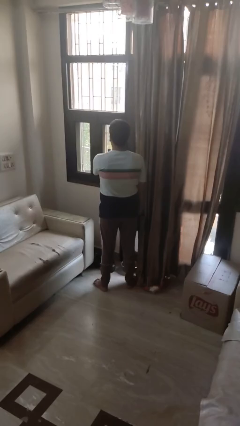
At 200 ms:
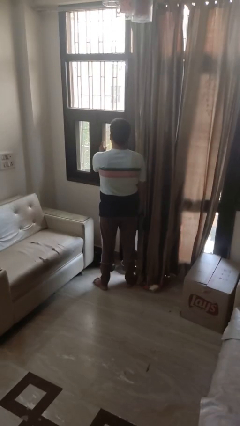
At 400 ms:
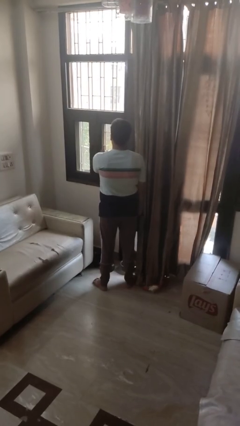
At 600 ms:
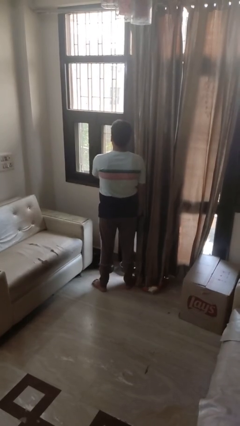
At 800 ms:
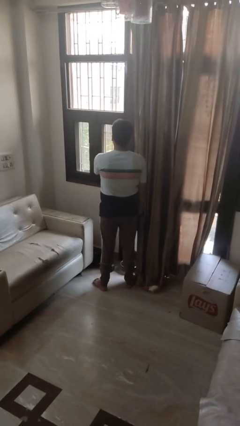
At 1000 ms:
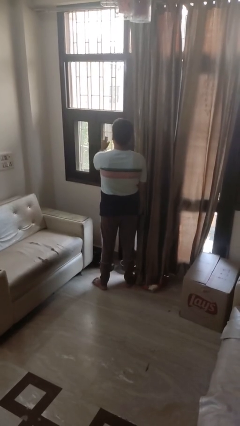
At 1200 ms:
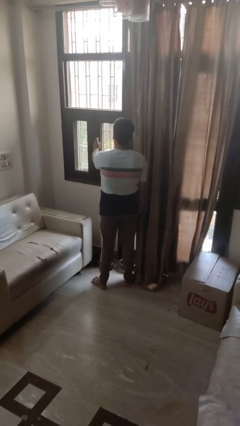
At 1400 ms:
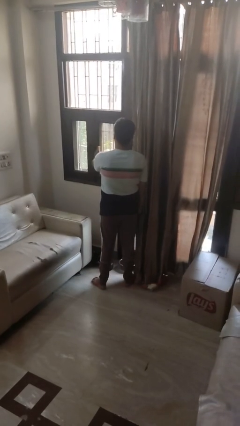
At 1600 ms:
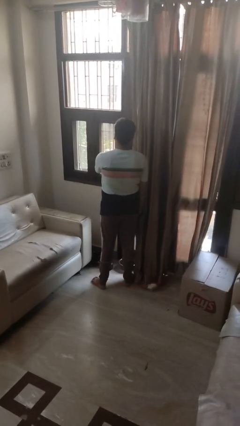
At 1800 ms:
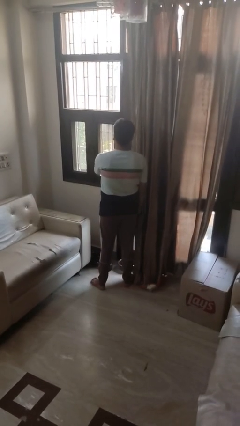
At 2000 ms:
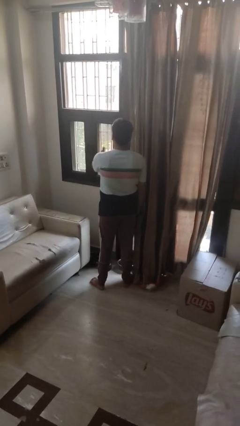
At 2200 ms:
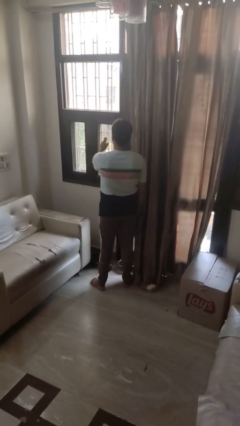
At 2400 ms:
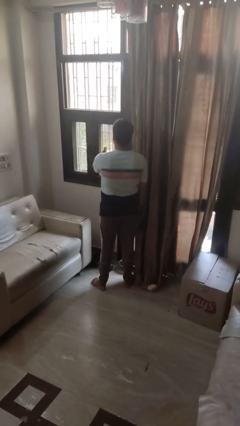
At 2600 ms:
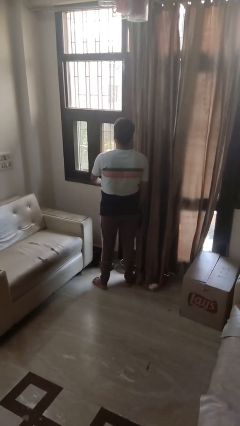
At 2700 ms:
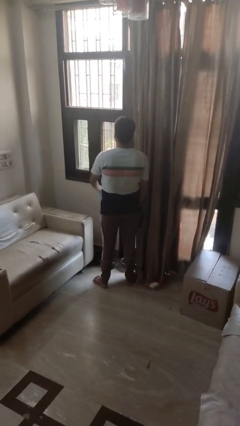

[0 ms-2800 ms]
person sprays from bottle

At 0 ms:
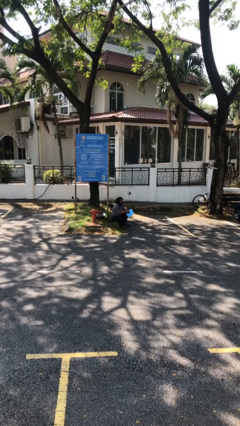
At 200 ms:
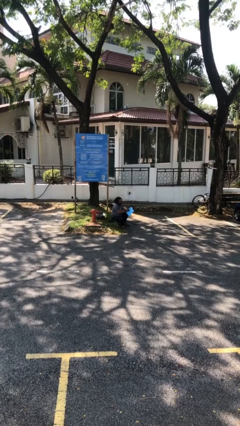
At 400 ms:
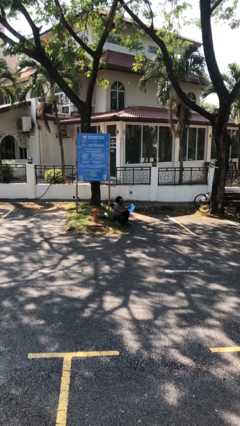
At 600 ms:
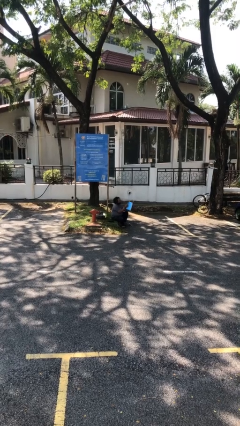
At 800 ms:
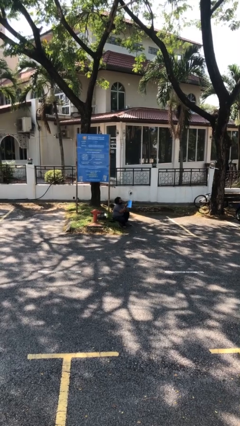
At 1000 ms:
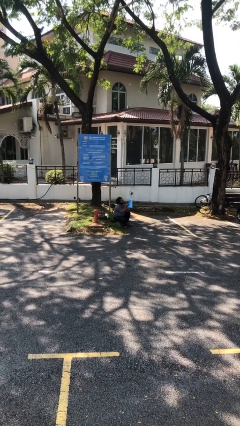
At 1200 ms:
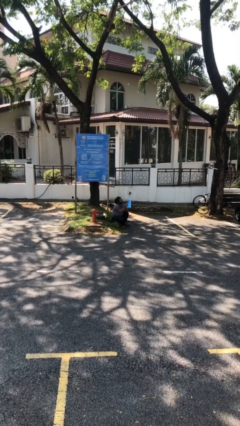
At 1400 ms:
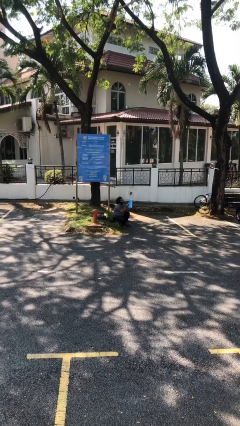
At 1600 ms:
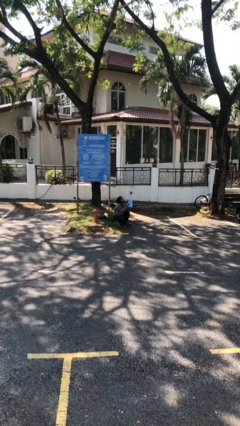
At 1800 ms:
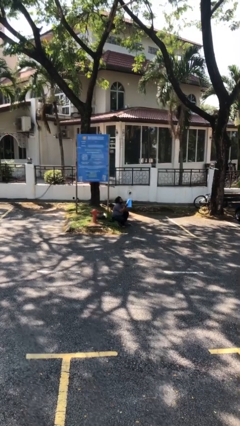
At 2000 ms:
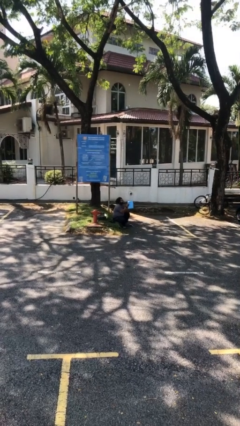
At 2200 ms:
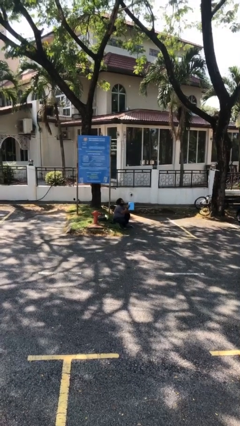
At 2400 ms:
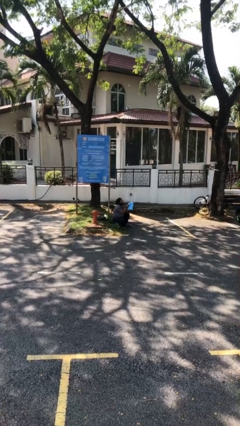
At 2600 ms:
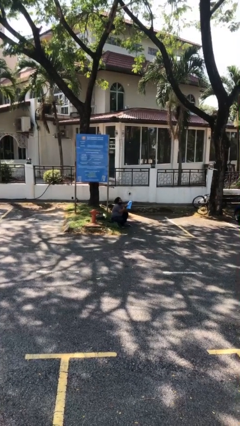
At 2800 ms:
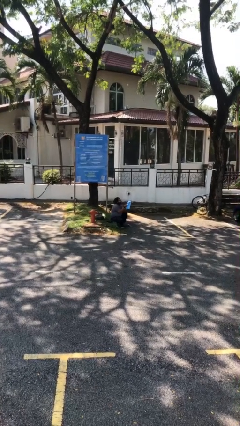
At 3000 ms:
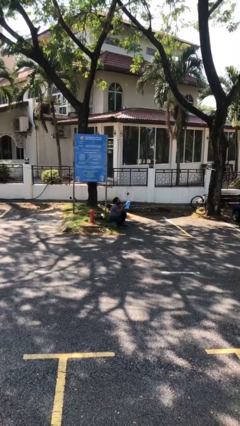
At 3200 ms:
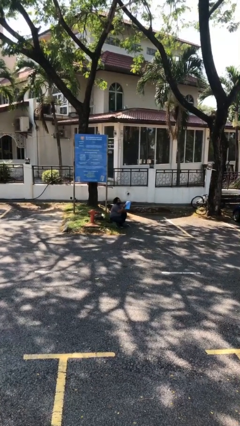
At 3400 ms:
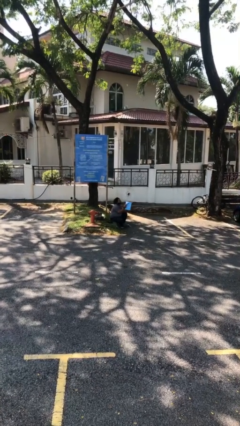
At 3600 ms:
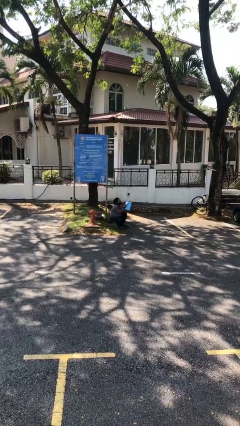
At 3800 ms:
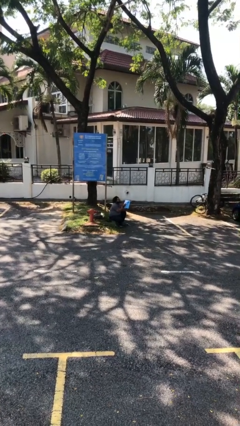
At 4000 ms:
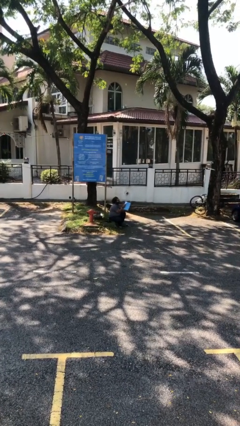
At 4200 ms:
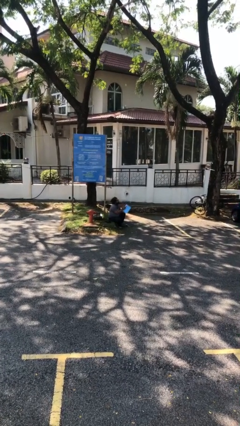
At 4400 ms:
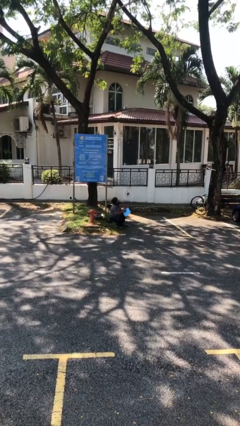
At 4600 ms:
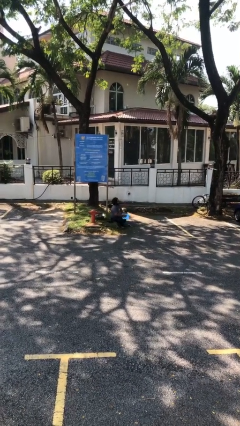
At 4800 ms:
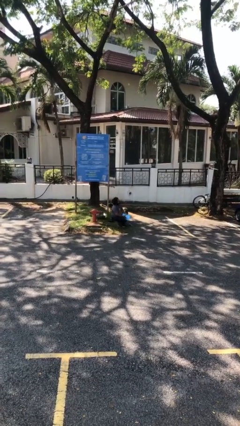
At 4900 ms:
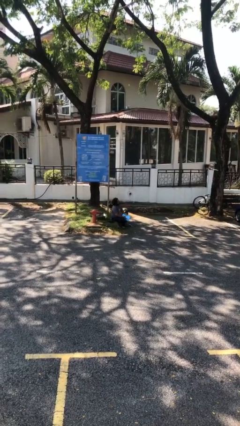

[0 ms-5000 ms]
person reads document

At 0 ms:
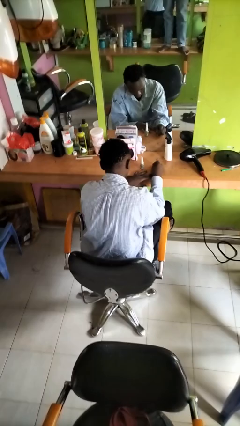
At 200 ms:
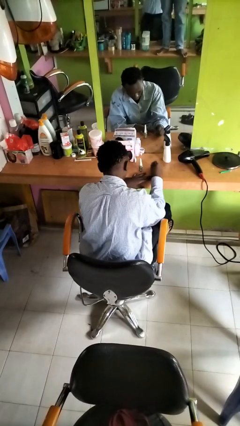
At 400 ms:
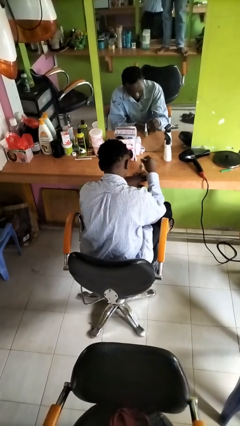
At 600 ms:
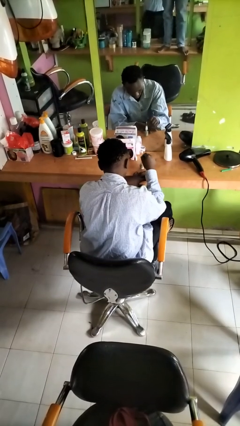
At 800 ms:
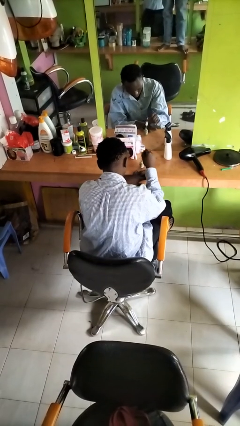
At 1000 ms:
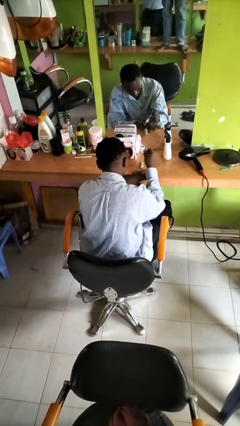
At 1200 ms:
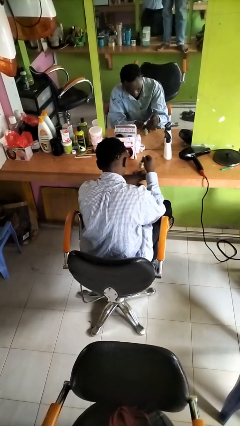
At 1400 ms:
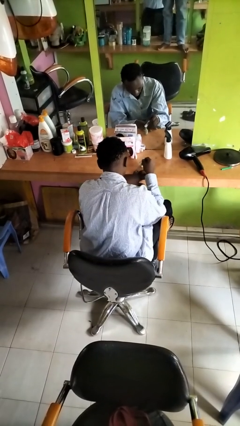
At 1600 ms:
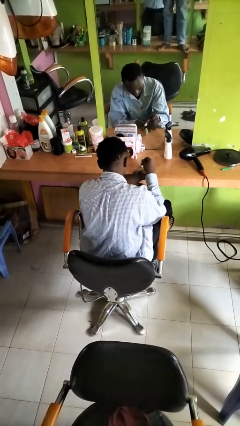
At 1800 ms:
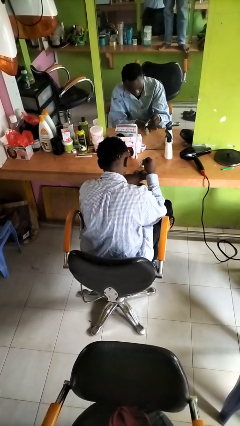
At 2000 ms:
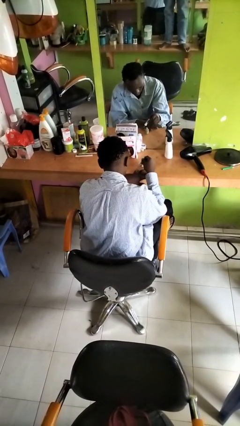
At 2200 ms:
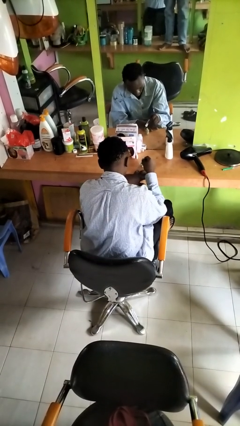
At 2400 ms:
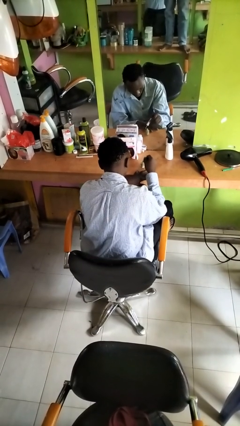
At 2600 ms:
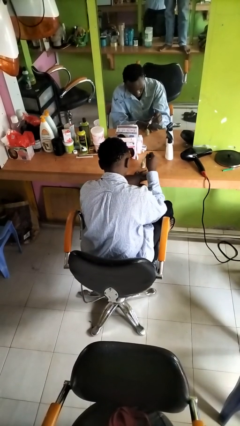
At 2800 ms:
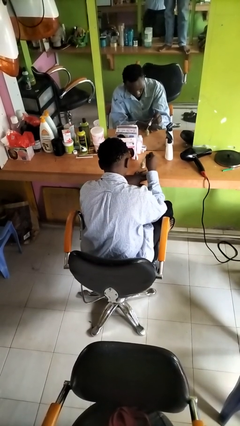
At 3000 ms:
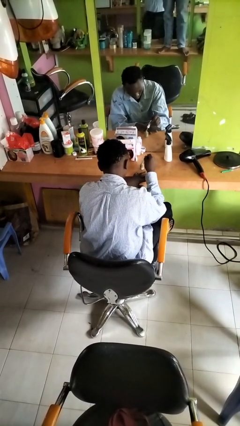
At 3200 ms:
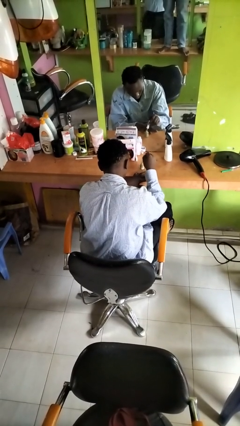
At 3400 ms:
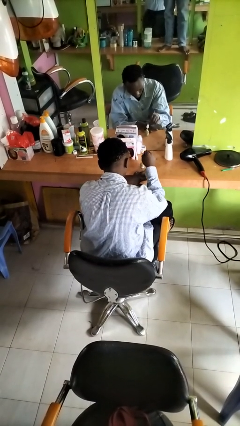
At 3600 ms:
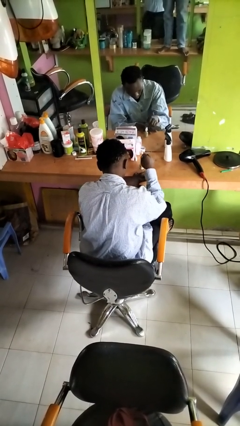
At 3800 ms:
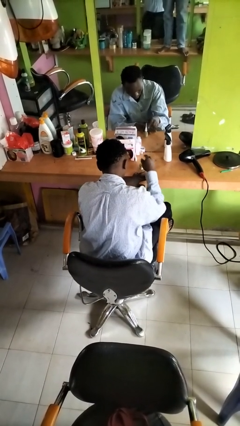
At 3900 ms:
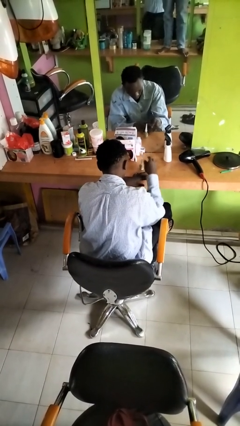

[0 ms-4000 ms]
person paints fingernails

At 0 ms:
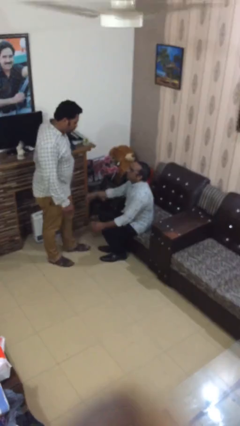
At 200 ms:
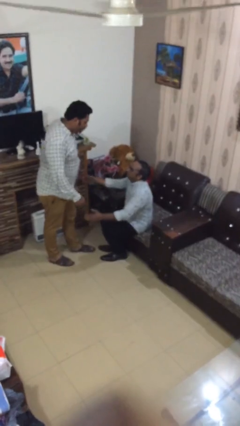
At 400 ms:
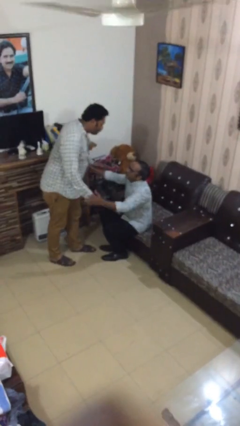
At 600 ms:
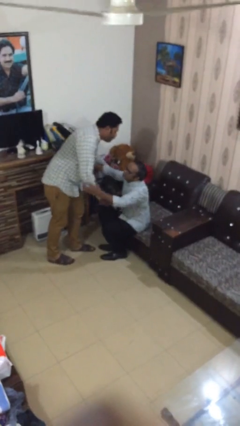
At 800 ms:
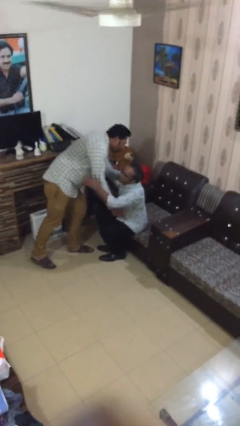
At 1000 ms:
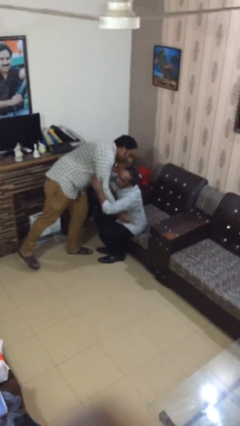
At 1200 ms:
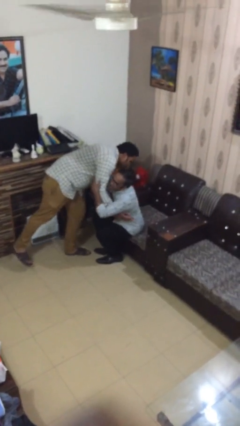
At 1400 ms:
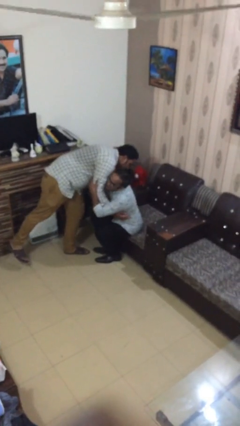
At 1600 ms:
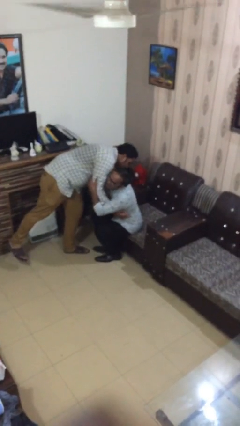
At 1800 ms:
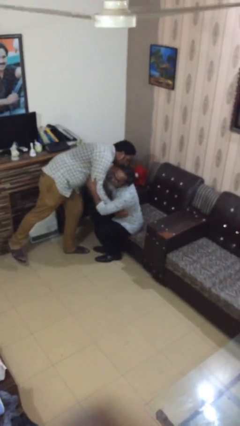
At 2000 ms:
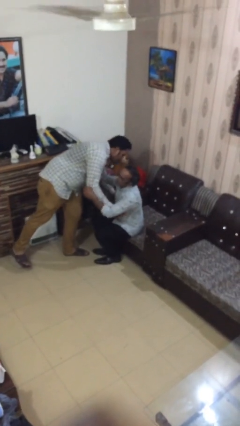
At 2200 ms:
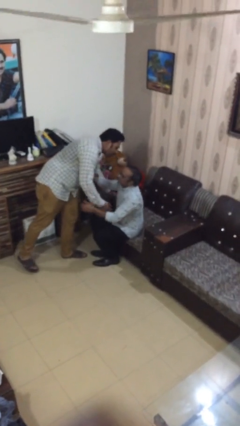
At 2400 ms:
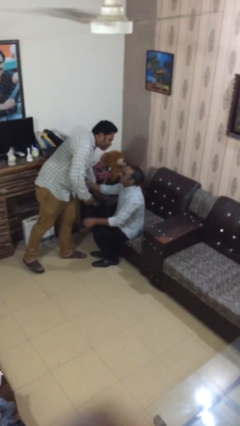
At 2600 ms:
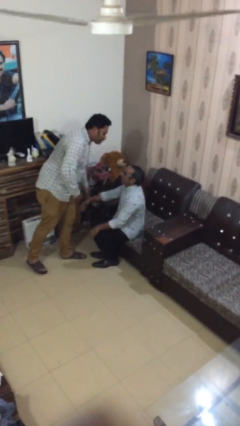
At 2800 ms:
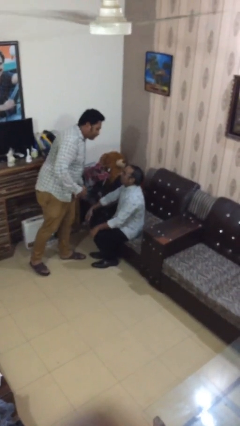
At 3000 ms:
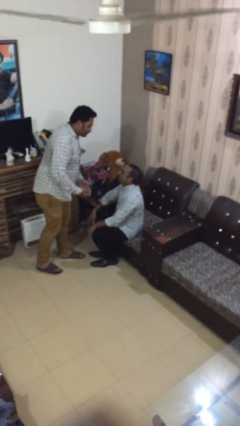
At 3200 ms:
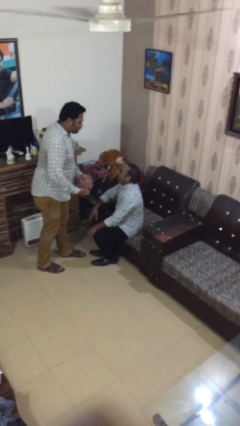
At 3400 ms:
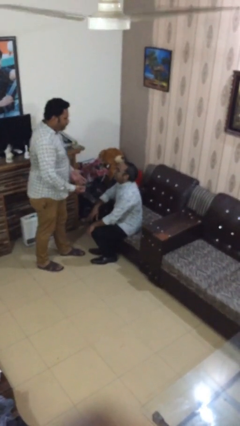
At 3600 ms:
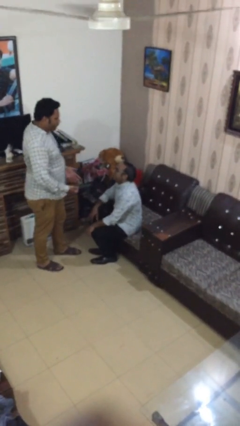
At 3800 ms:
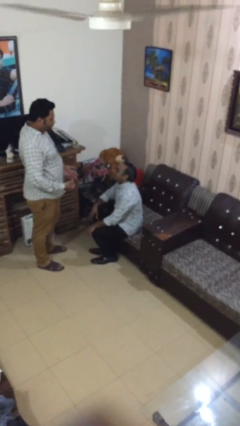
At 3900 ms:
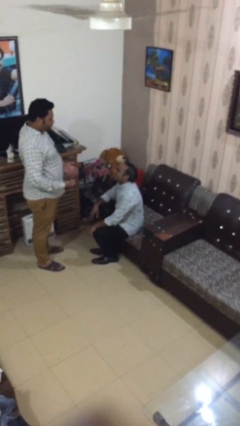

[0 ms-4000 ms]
person embraces person

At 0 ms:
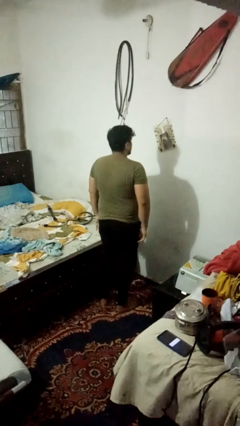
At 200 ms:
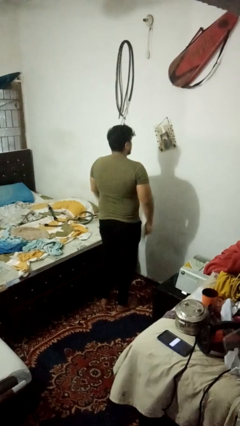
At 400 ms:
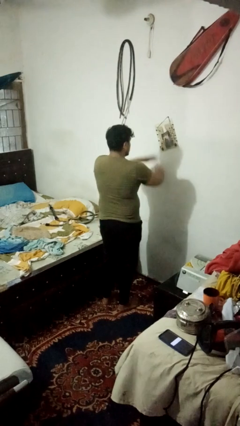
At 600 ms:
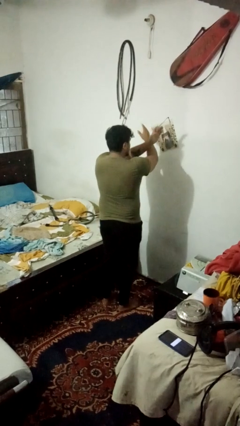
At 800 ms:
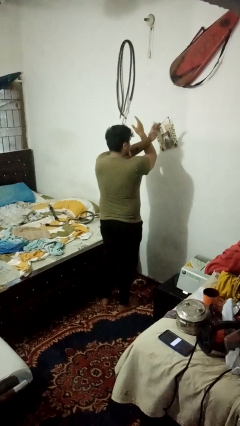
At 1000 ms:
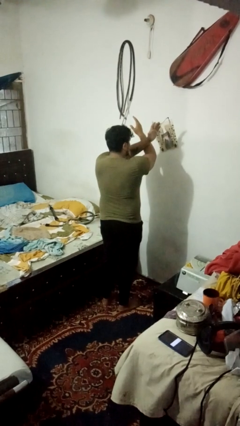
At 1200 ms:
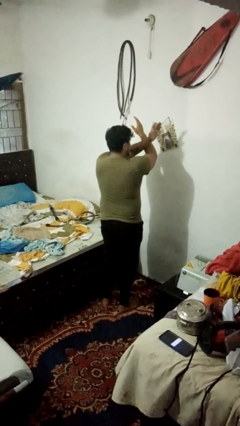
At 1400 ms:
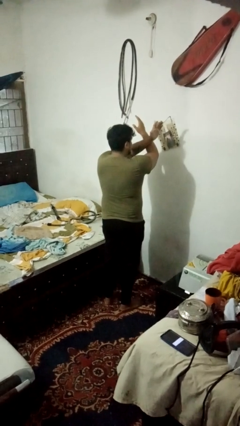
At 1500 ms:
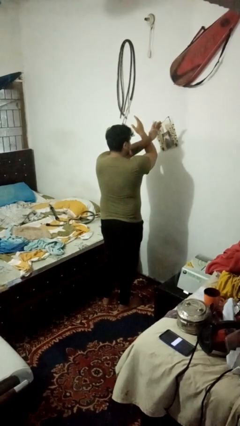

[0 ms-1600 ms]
person gestures arms x
